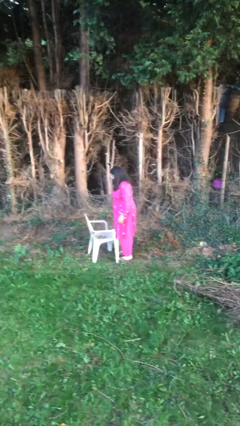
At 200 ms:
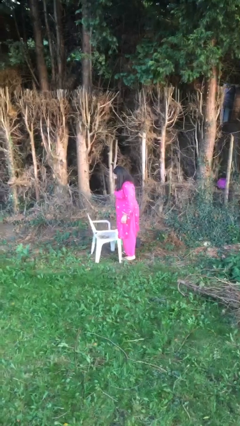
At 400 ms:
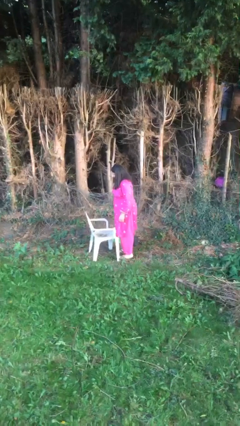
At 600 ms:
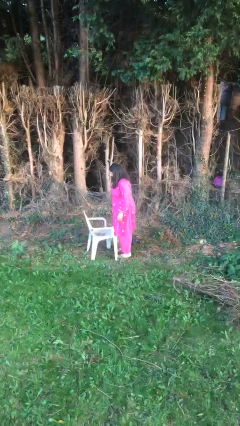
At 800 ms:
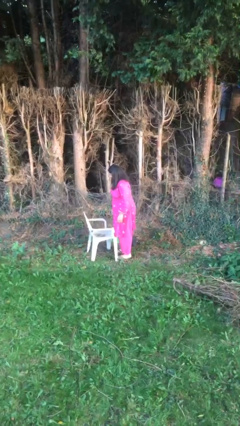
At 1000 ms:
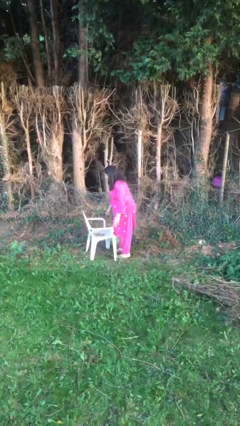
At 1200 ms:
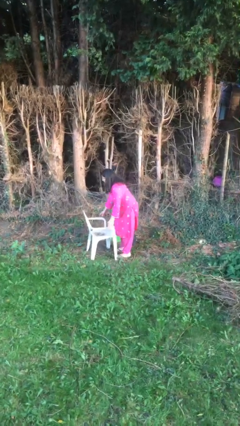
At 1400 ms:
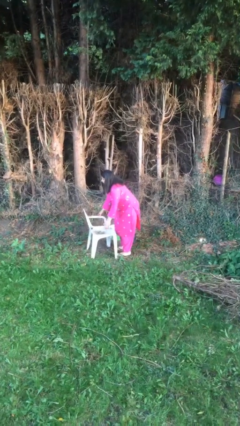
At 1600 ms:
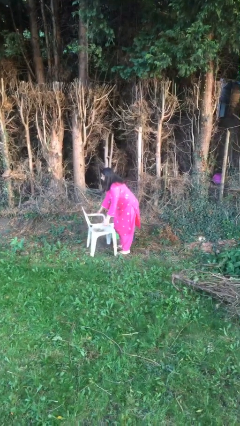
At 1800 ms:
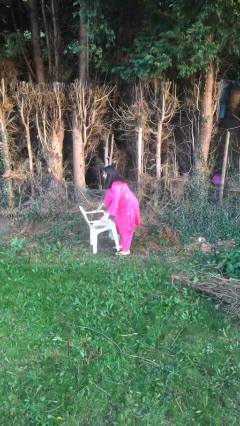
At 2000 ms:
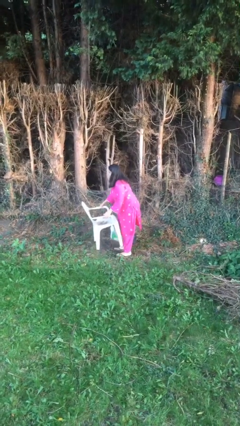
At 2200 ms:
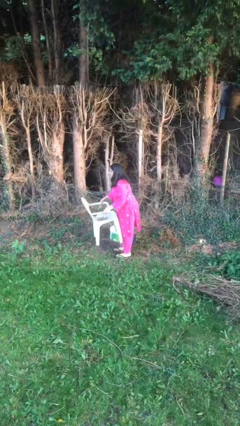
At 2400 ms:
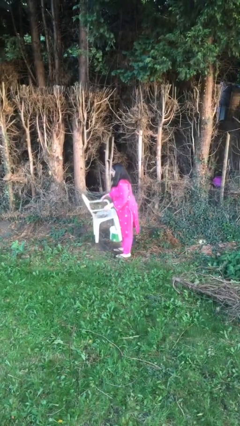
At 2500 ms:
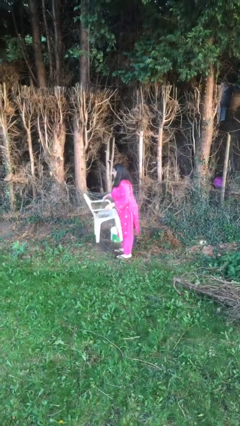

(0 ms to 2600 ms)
person picks up object from floor

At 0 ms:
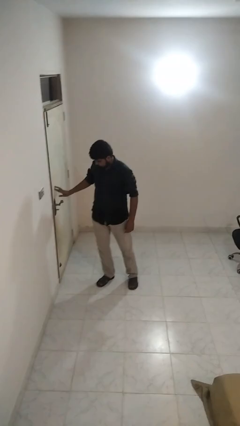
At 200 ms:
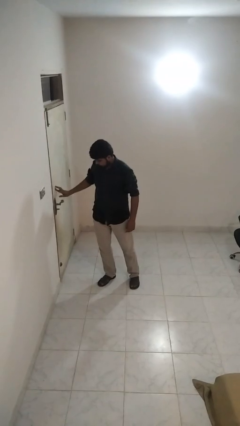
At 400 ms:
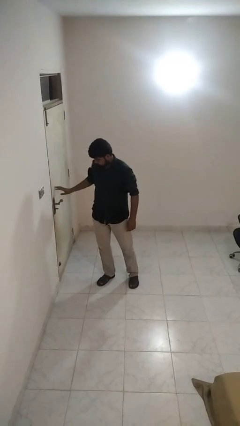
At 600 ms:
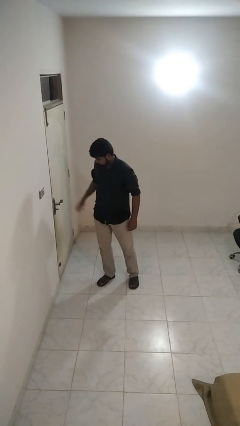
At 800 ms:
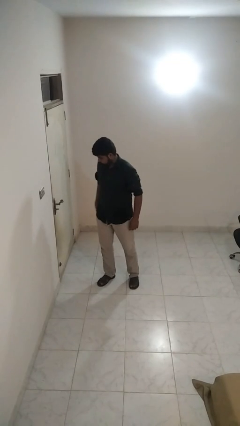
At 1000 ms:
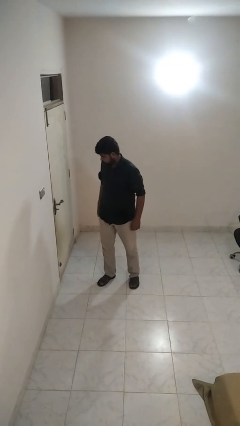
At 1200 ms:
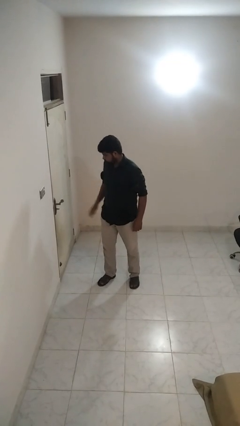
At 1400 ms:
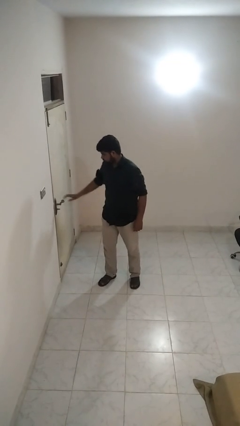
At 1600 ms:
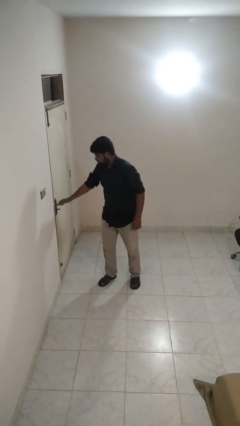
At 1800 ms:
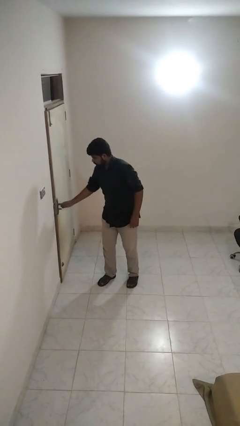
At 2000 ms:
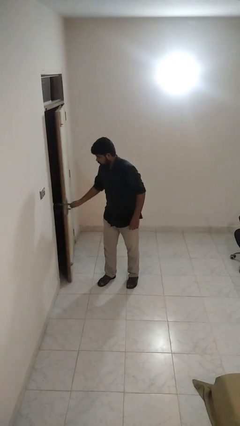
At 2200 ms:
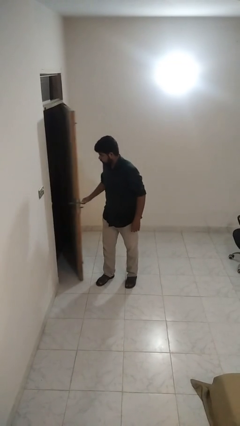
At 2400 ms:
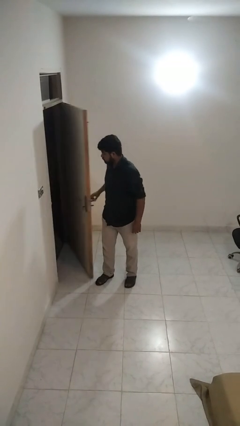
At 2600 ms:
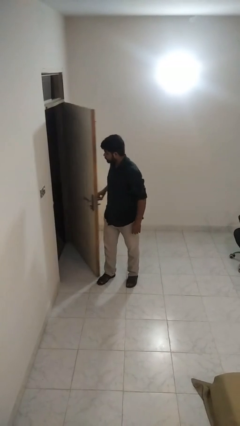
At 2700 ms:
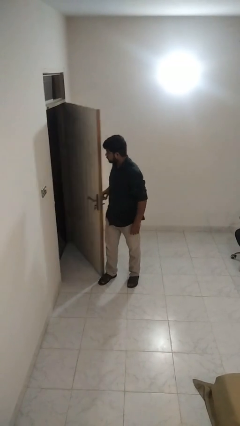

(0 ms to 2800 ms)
person opens facility door

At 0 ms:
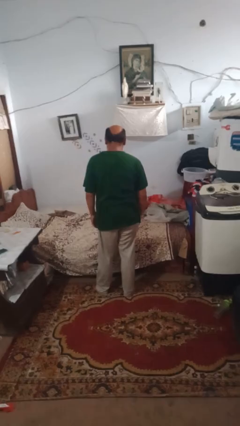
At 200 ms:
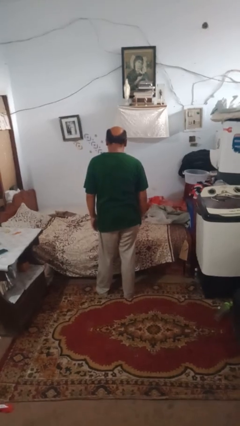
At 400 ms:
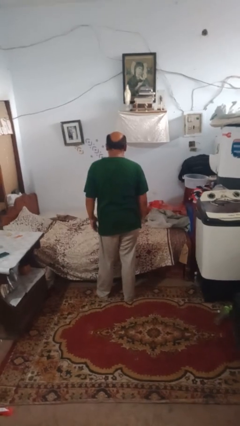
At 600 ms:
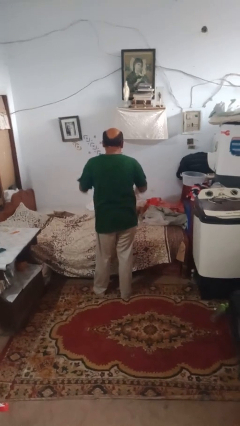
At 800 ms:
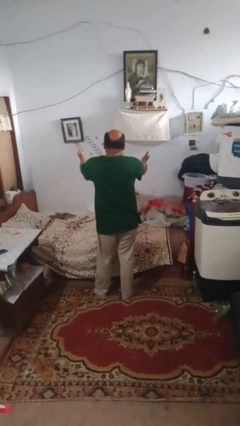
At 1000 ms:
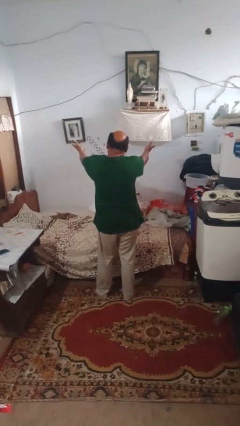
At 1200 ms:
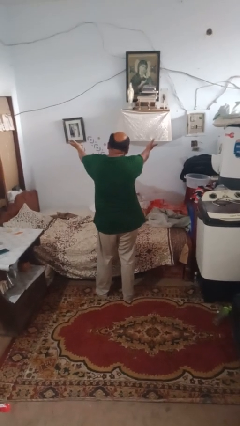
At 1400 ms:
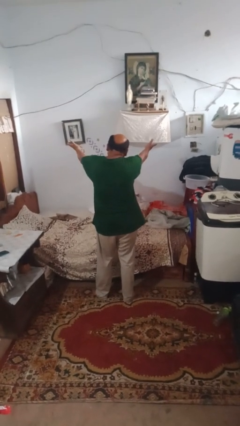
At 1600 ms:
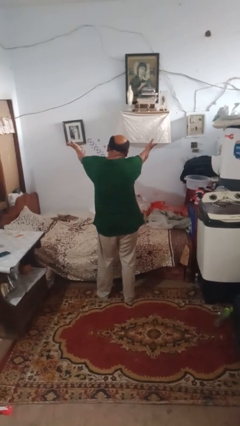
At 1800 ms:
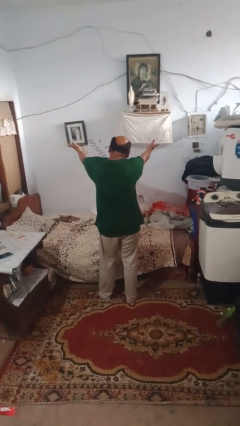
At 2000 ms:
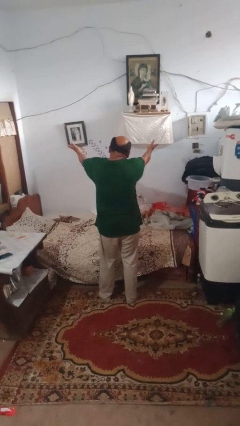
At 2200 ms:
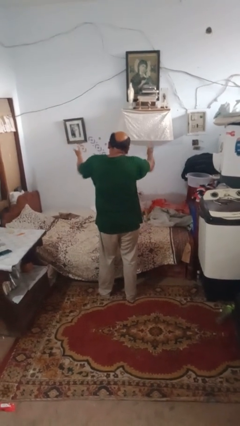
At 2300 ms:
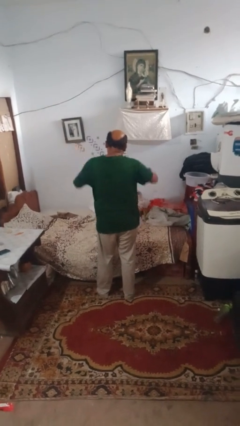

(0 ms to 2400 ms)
person shrugs

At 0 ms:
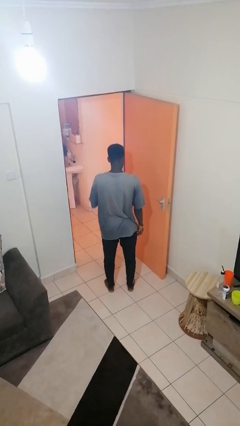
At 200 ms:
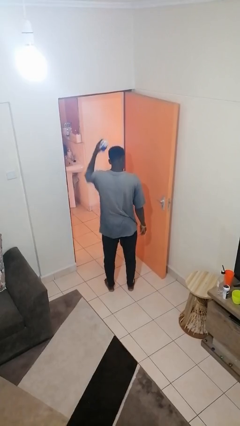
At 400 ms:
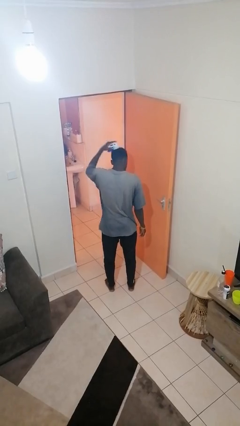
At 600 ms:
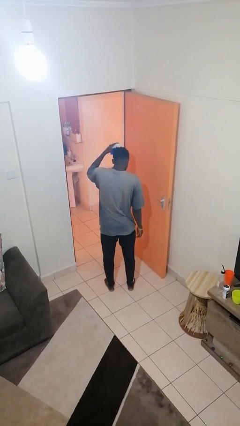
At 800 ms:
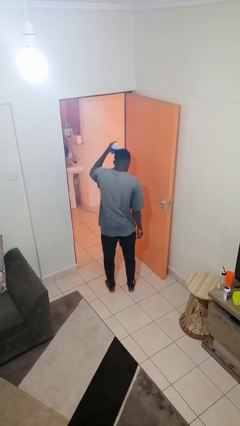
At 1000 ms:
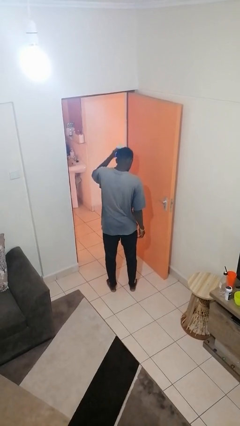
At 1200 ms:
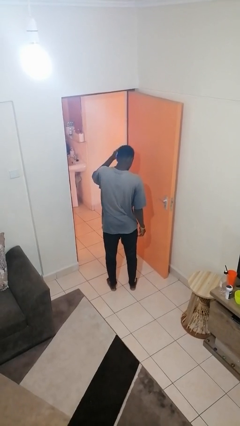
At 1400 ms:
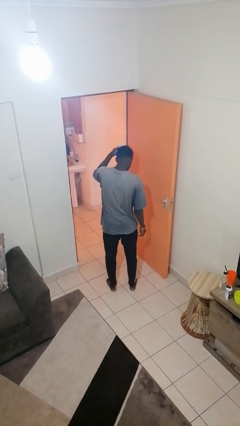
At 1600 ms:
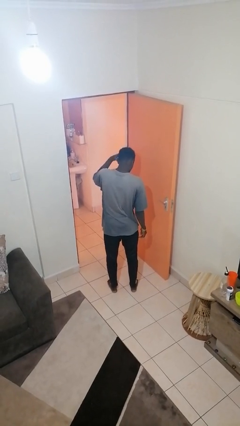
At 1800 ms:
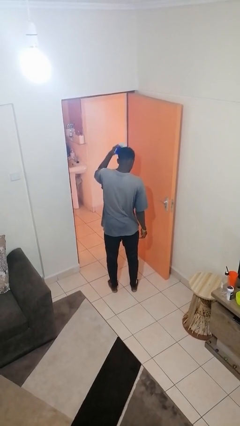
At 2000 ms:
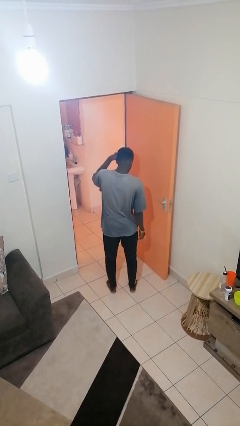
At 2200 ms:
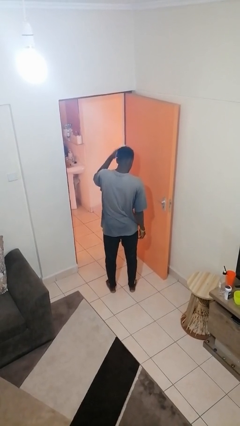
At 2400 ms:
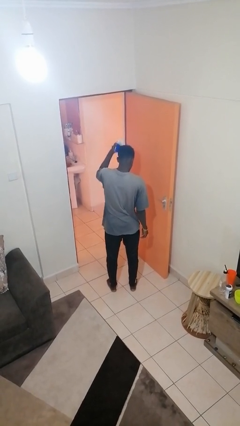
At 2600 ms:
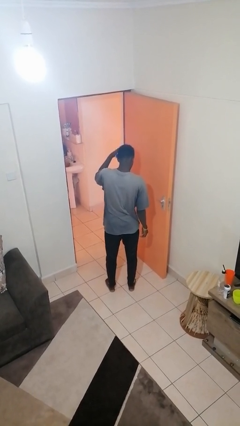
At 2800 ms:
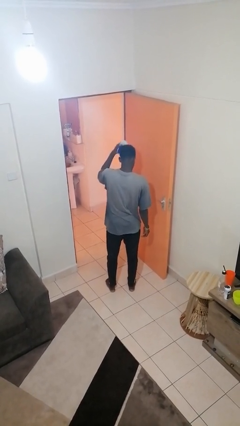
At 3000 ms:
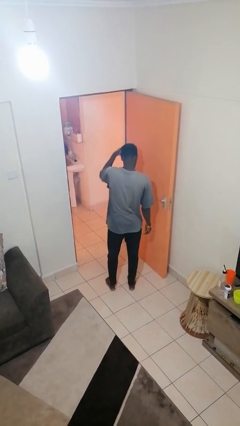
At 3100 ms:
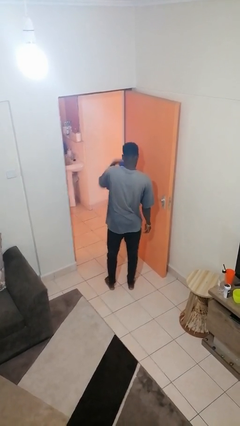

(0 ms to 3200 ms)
person brushes hair

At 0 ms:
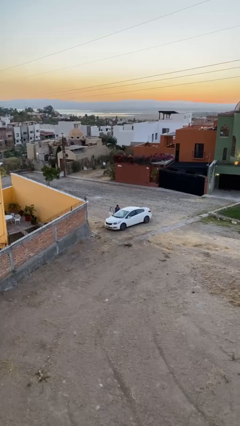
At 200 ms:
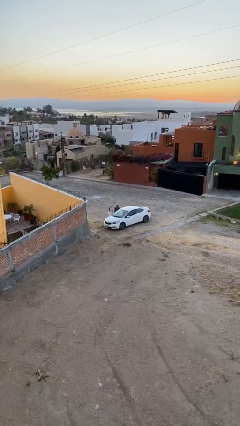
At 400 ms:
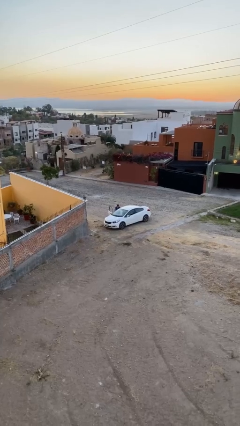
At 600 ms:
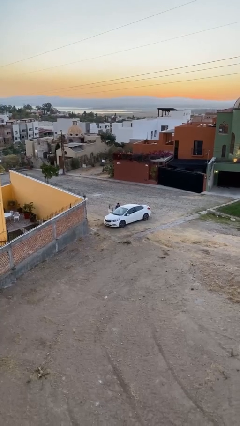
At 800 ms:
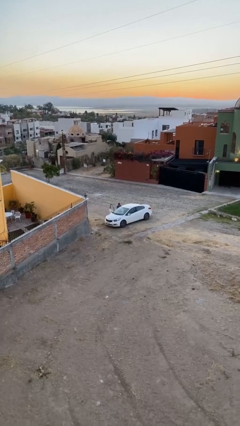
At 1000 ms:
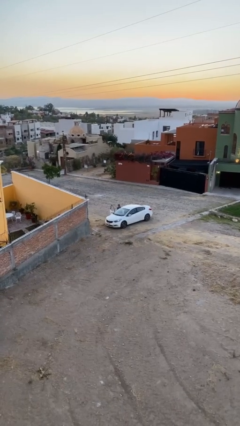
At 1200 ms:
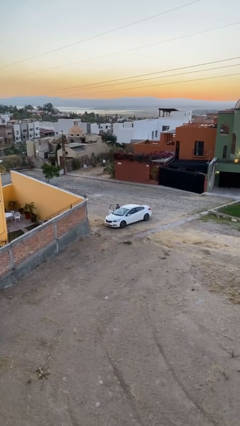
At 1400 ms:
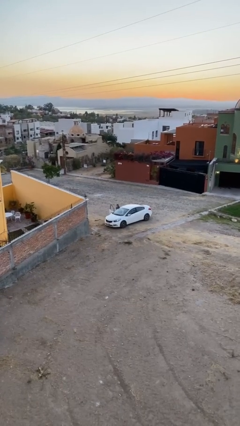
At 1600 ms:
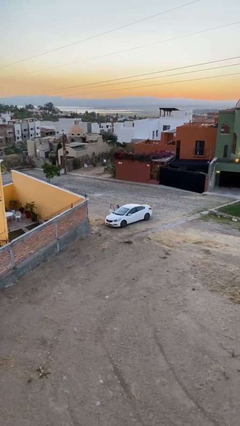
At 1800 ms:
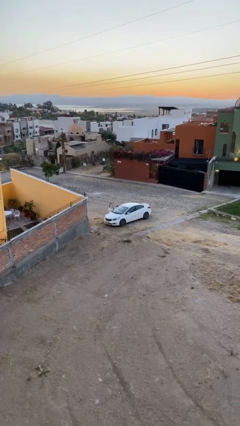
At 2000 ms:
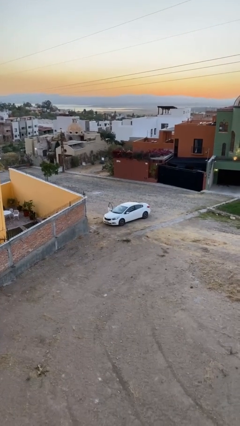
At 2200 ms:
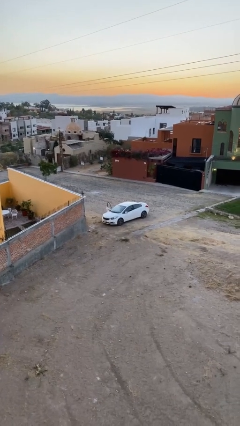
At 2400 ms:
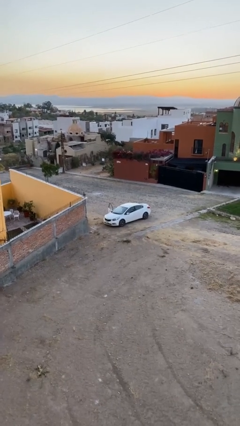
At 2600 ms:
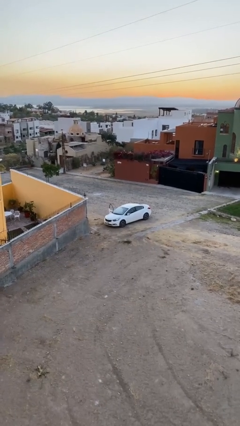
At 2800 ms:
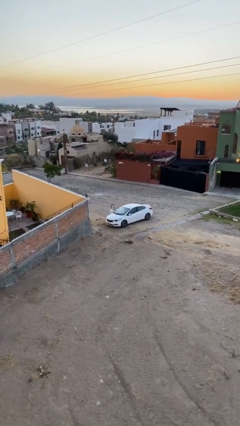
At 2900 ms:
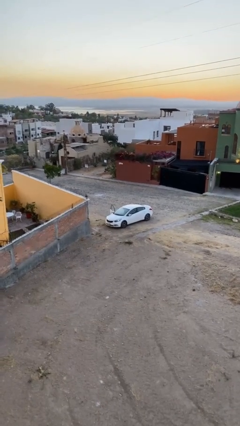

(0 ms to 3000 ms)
person enters car

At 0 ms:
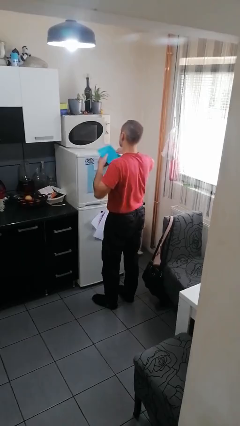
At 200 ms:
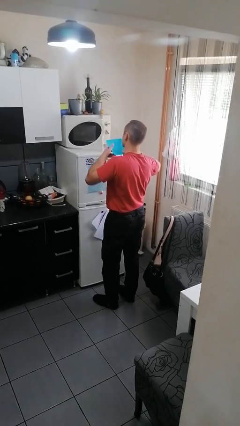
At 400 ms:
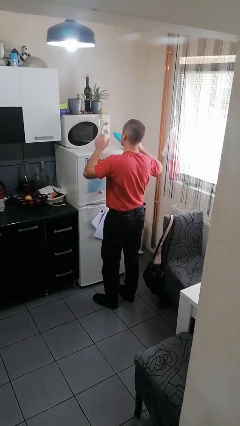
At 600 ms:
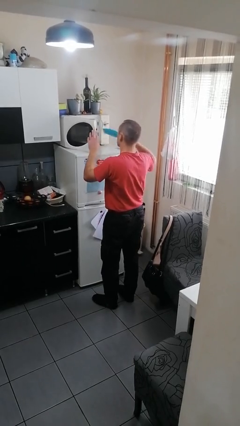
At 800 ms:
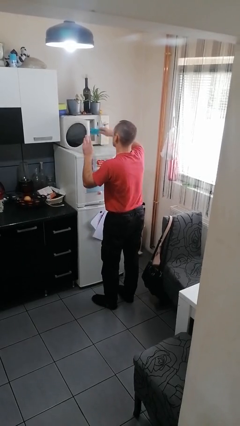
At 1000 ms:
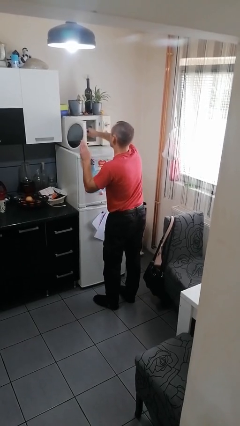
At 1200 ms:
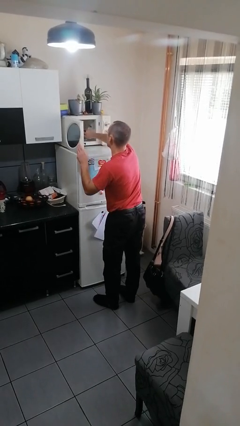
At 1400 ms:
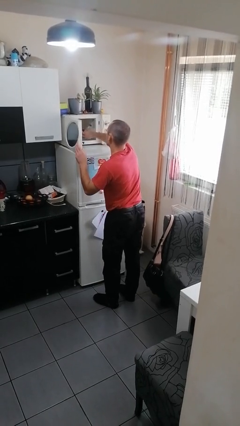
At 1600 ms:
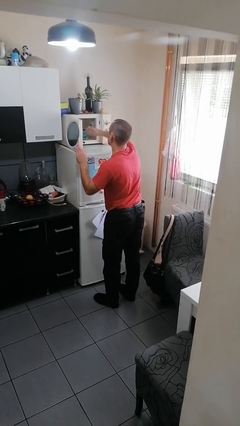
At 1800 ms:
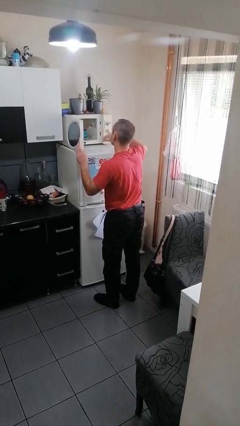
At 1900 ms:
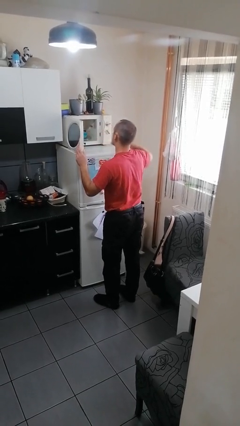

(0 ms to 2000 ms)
person puts object into microwave

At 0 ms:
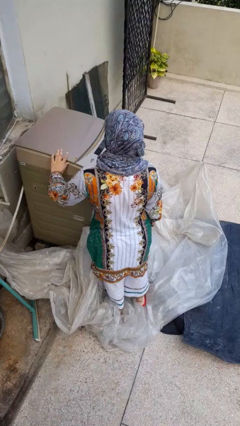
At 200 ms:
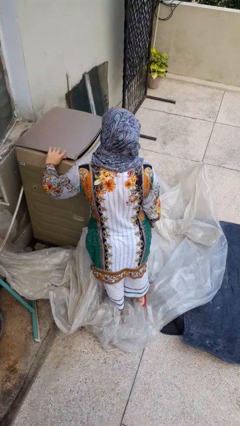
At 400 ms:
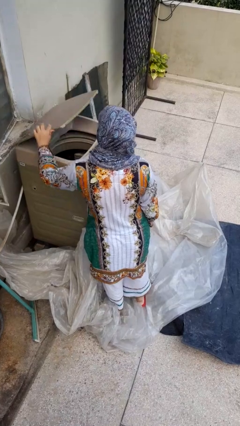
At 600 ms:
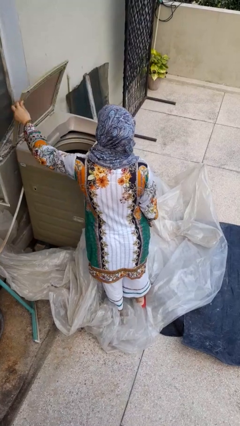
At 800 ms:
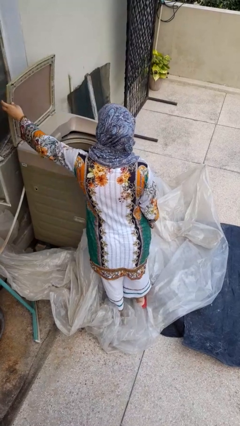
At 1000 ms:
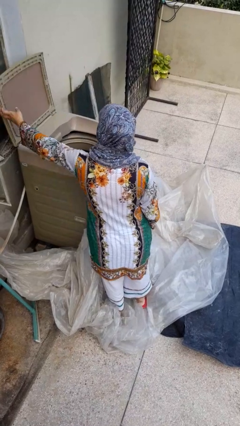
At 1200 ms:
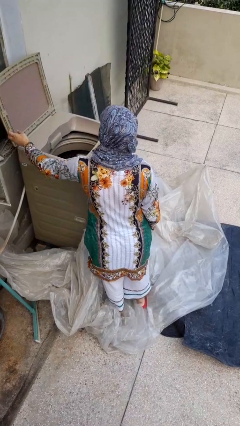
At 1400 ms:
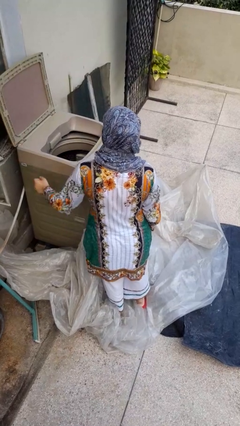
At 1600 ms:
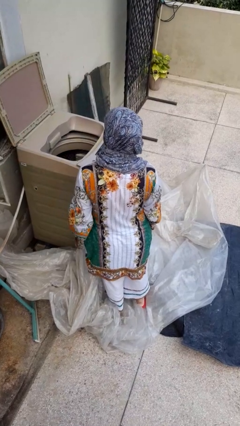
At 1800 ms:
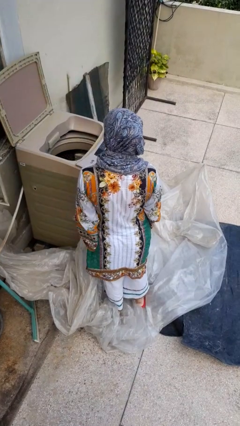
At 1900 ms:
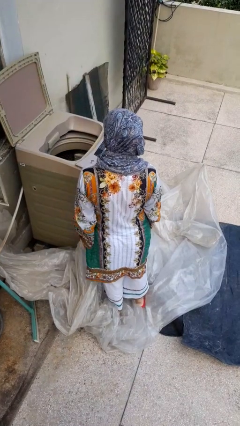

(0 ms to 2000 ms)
person opens clothes washer
